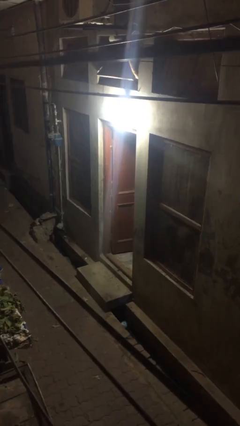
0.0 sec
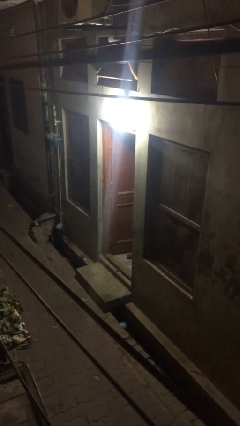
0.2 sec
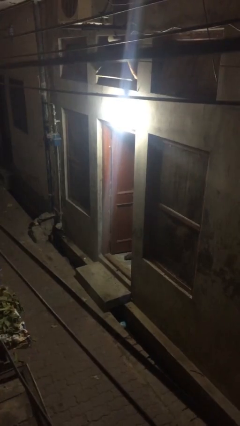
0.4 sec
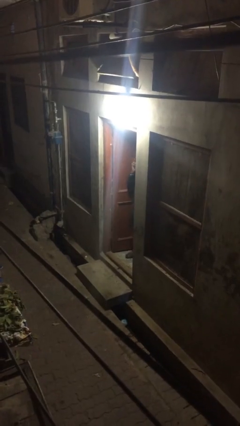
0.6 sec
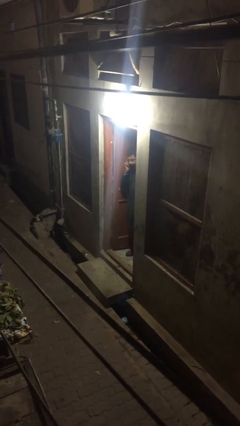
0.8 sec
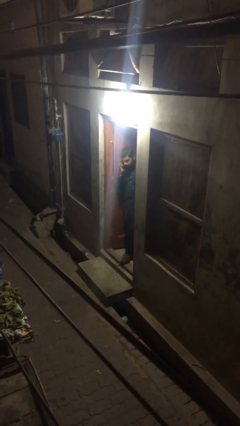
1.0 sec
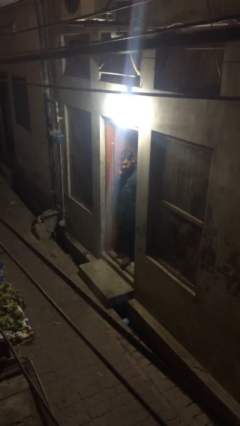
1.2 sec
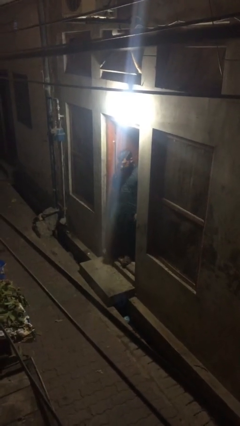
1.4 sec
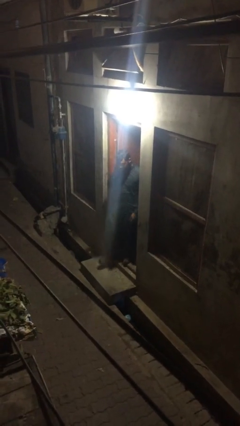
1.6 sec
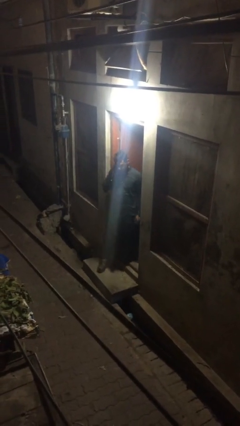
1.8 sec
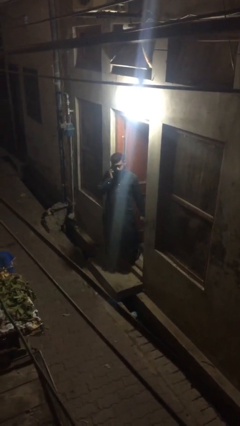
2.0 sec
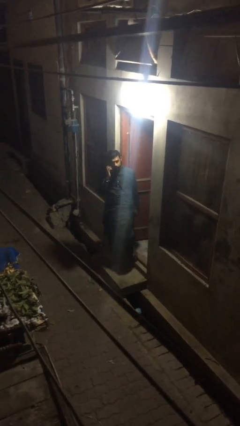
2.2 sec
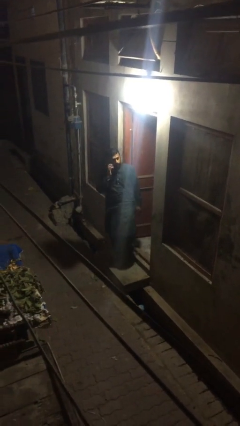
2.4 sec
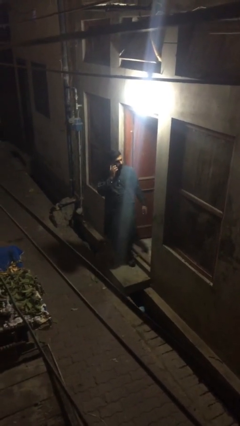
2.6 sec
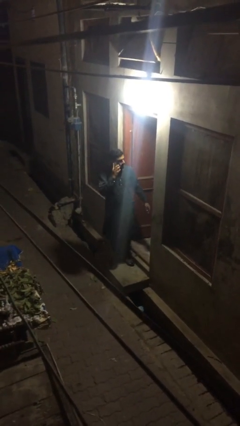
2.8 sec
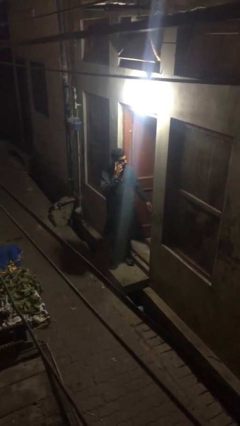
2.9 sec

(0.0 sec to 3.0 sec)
person enters scene through structure

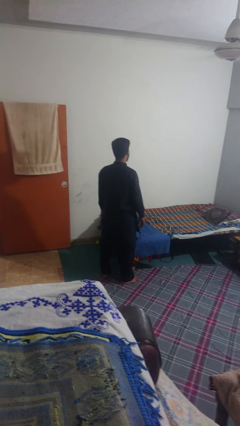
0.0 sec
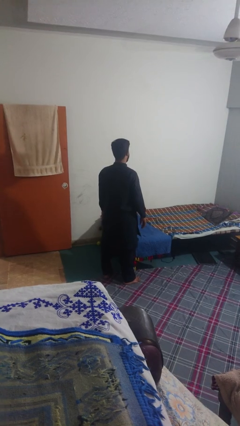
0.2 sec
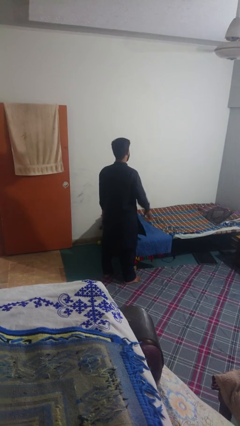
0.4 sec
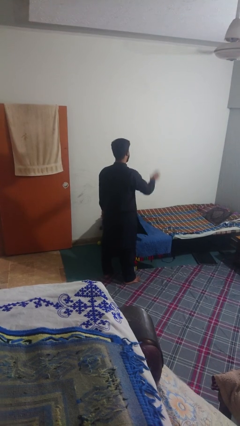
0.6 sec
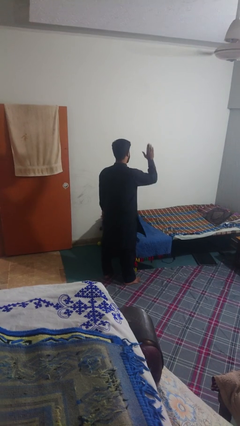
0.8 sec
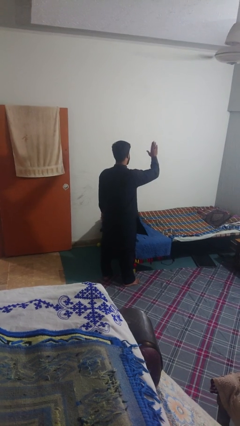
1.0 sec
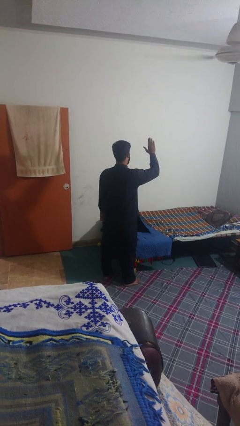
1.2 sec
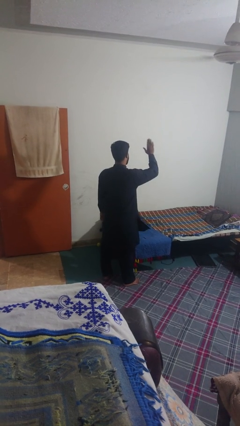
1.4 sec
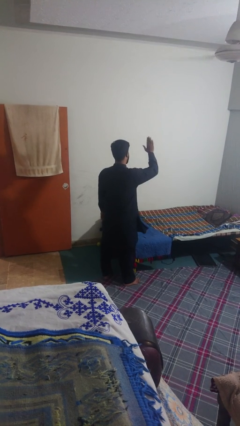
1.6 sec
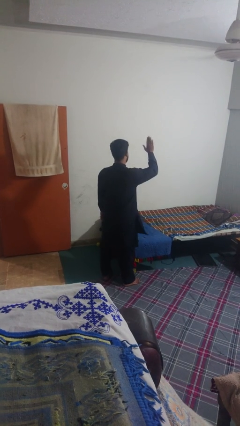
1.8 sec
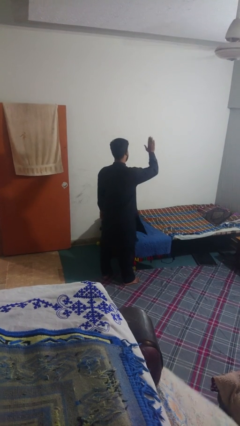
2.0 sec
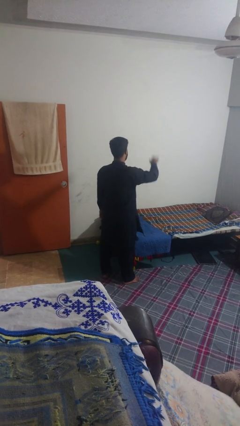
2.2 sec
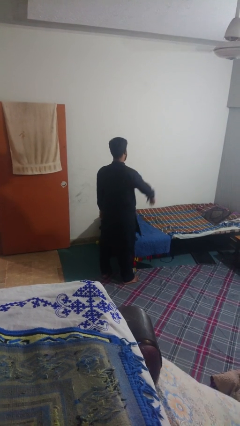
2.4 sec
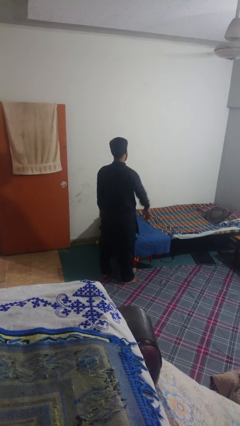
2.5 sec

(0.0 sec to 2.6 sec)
person gestures stop

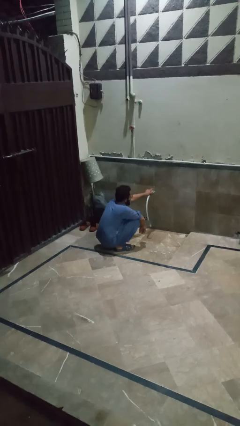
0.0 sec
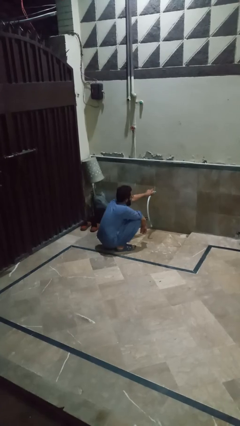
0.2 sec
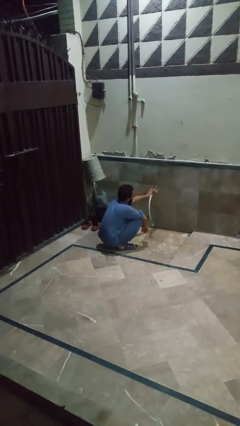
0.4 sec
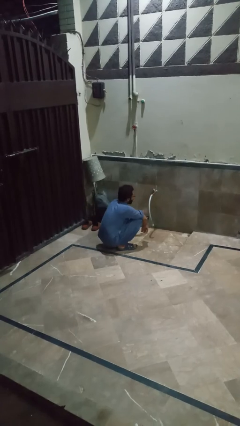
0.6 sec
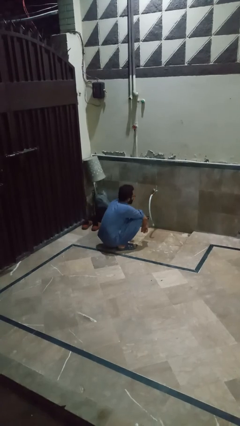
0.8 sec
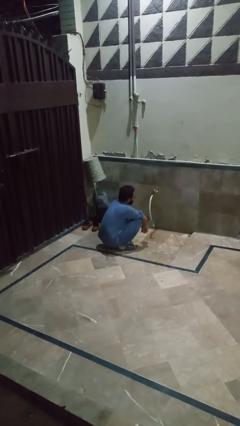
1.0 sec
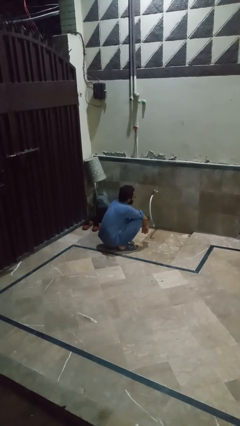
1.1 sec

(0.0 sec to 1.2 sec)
person turns off faucet

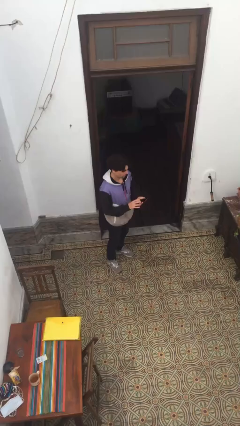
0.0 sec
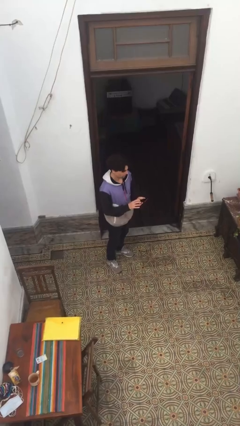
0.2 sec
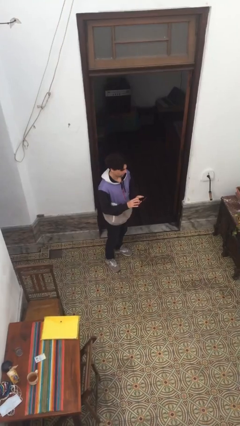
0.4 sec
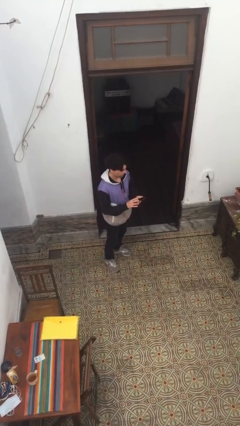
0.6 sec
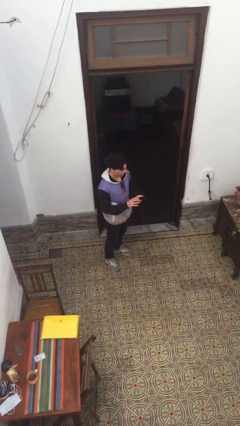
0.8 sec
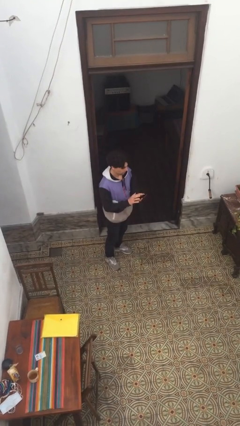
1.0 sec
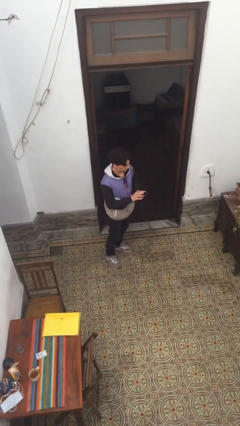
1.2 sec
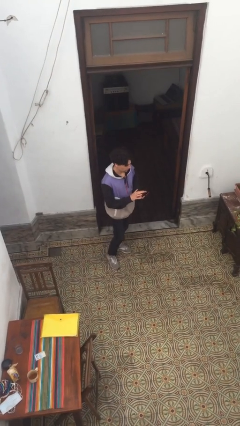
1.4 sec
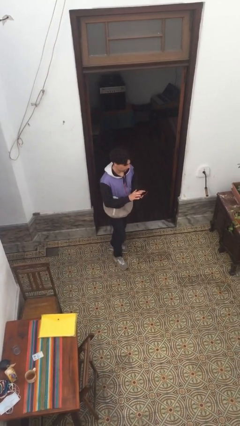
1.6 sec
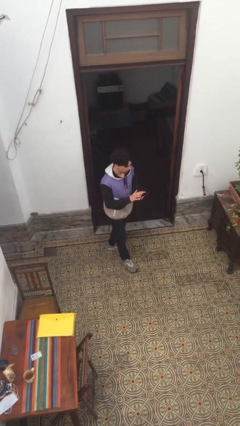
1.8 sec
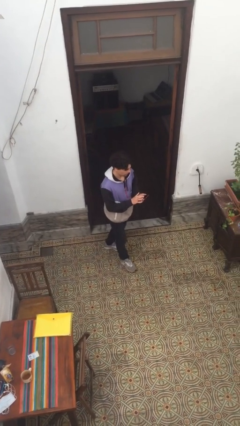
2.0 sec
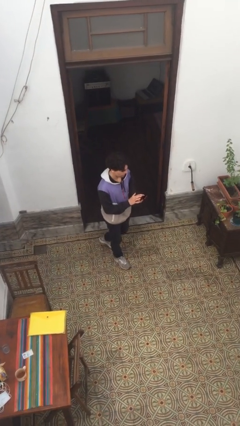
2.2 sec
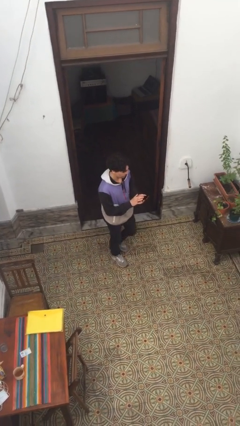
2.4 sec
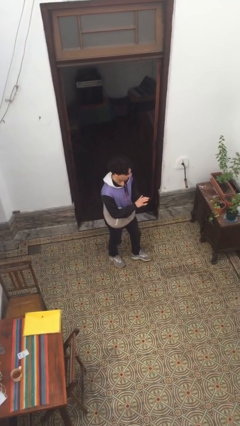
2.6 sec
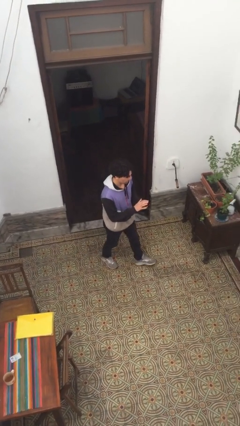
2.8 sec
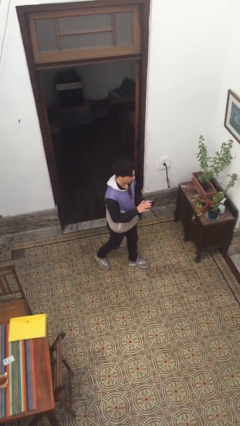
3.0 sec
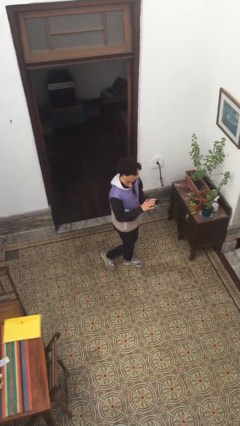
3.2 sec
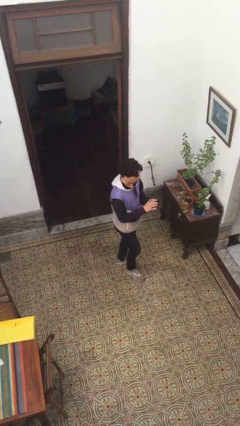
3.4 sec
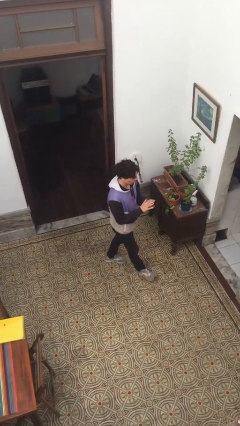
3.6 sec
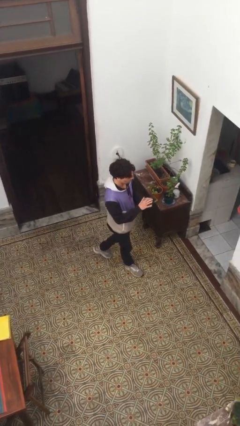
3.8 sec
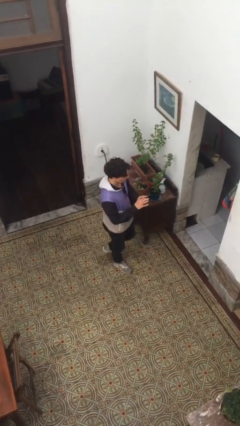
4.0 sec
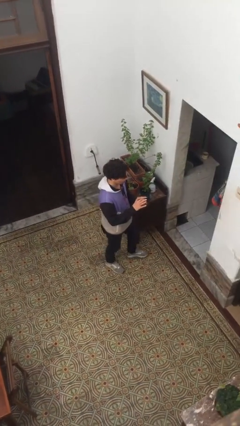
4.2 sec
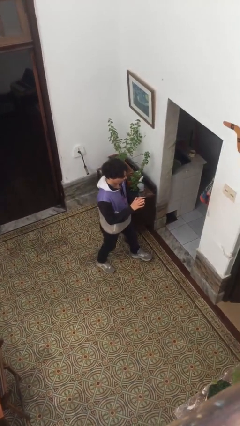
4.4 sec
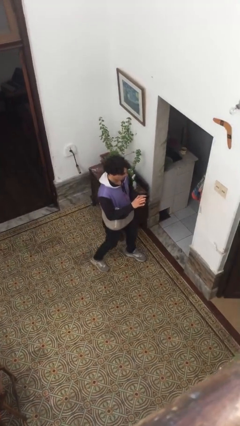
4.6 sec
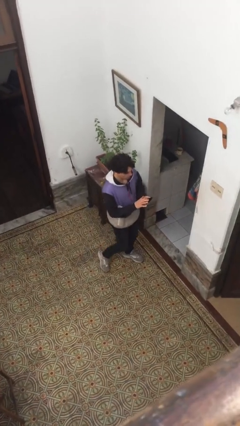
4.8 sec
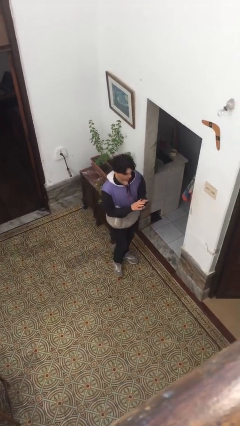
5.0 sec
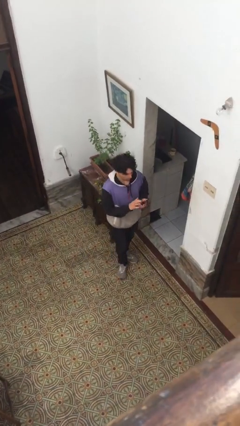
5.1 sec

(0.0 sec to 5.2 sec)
person texts on phone

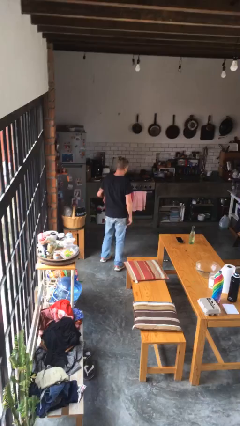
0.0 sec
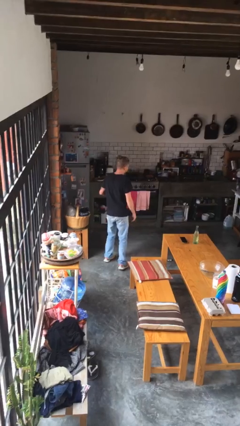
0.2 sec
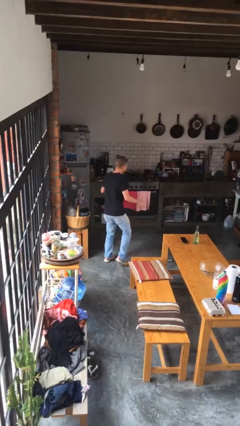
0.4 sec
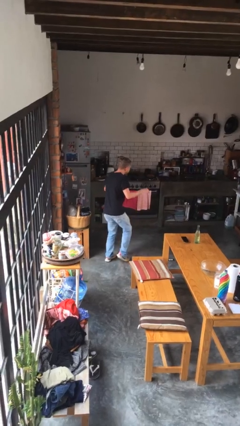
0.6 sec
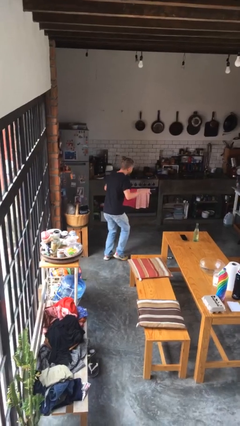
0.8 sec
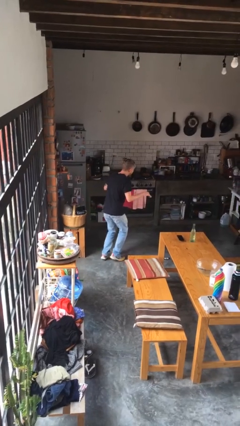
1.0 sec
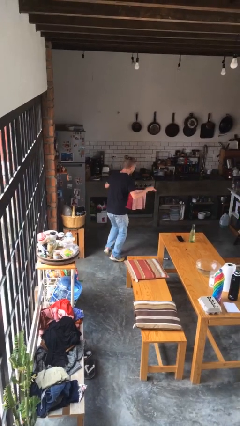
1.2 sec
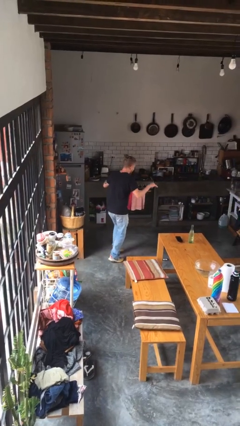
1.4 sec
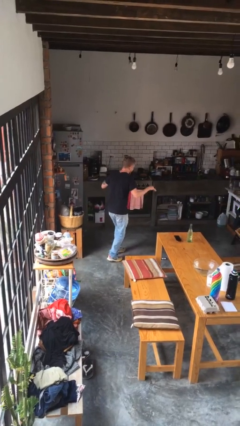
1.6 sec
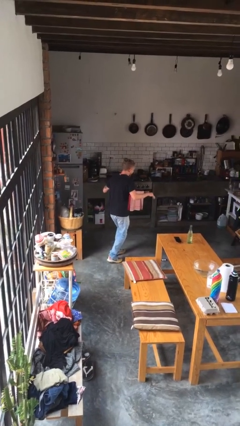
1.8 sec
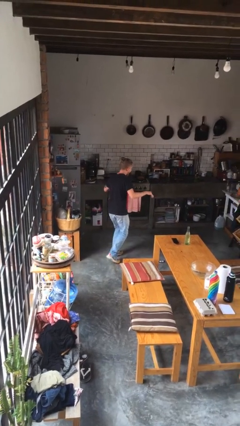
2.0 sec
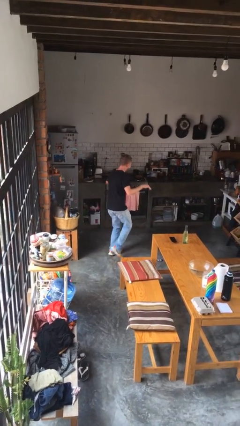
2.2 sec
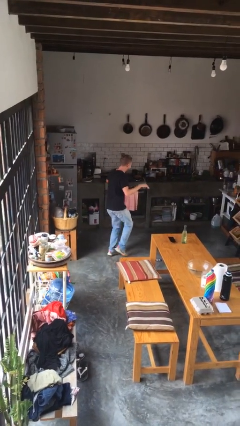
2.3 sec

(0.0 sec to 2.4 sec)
person walks tiptoe

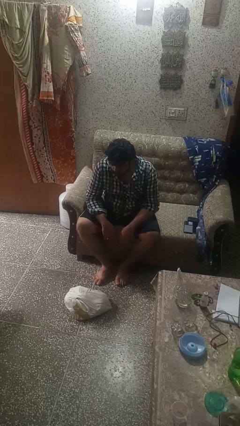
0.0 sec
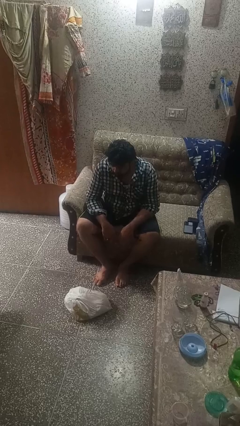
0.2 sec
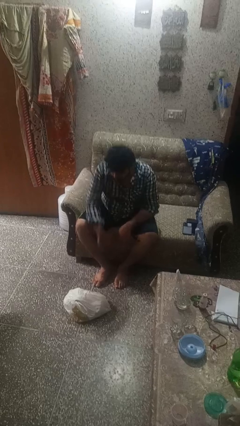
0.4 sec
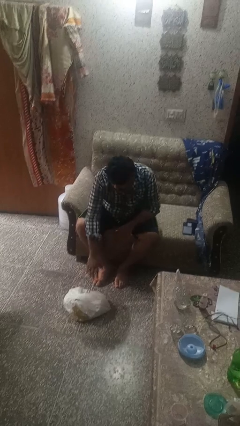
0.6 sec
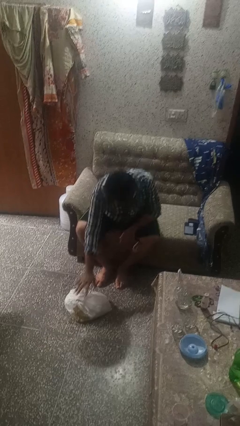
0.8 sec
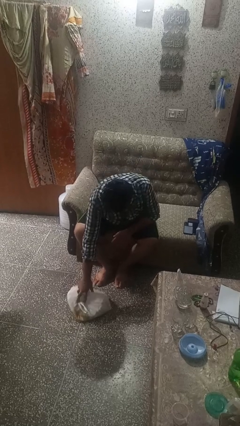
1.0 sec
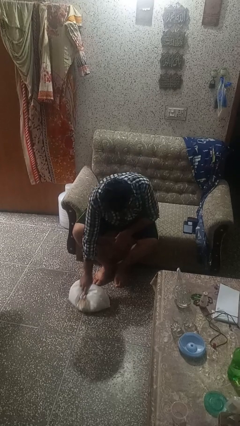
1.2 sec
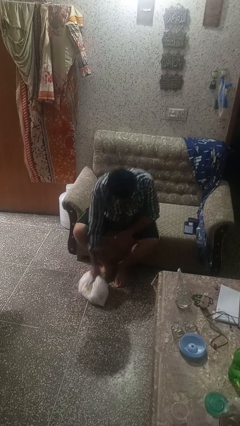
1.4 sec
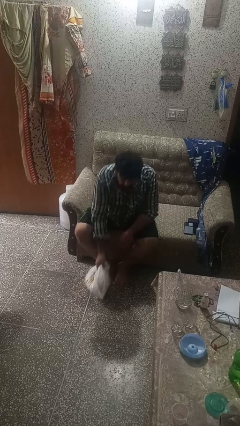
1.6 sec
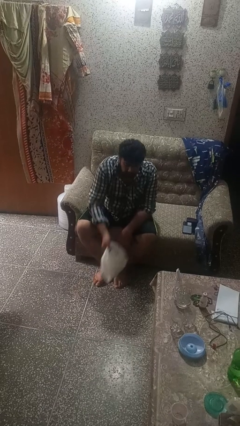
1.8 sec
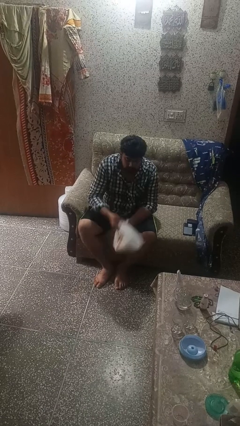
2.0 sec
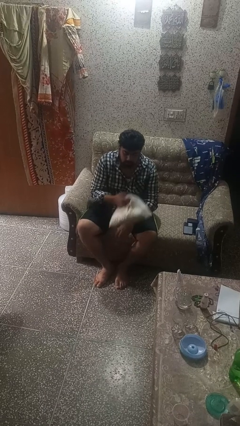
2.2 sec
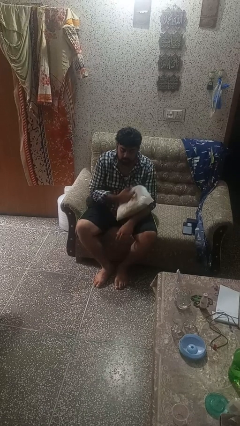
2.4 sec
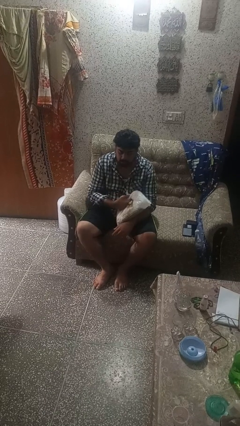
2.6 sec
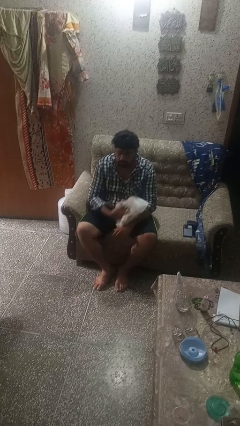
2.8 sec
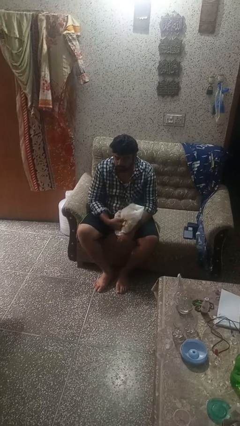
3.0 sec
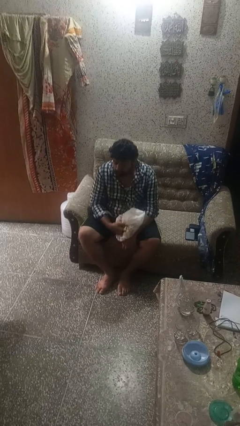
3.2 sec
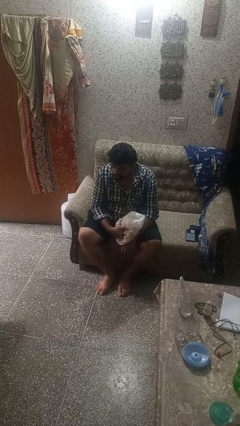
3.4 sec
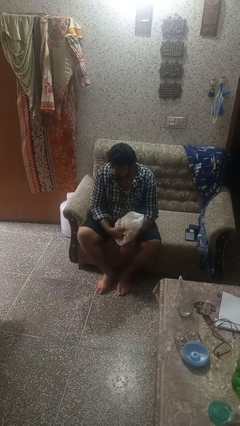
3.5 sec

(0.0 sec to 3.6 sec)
person picks up object from floor
